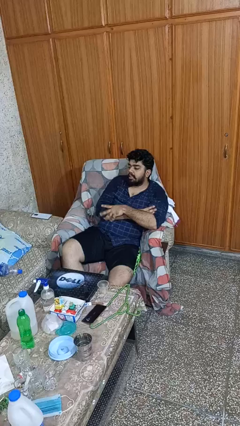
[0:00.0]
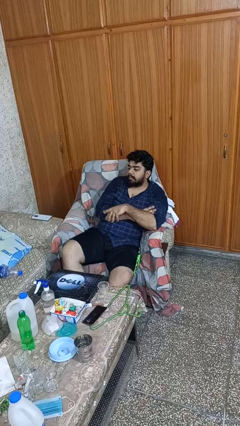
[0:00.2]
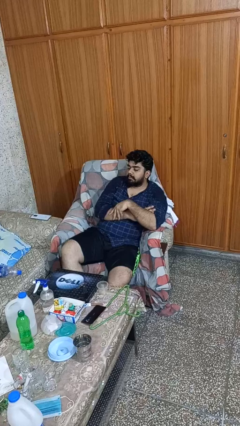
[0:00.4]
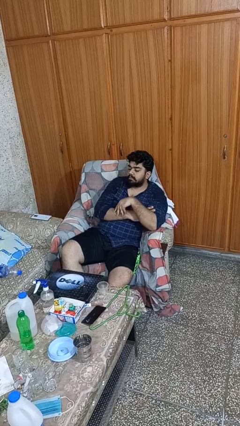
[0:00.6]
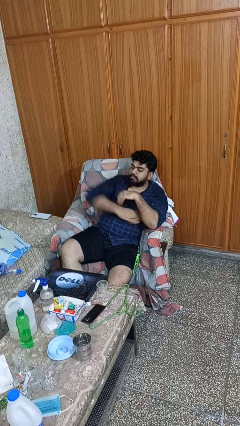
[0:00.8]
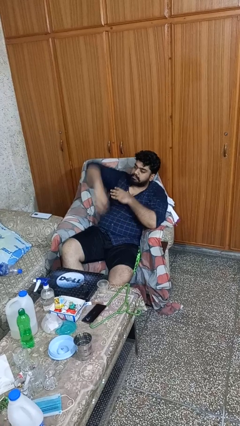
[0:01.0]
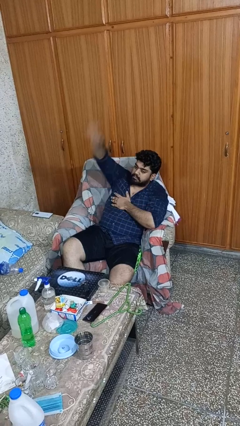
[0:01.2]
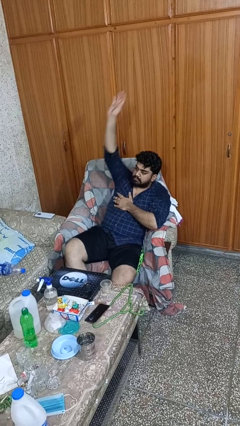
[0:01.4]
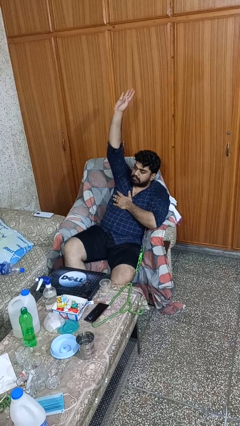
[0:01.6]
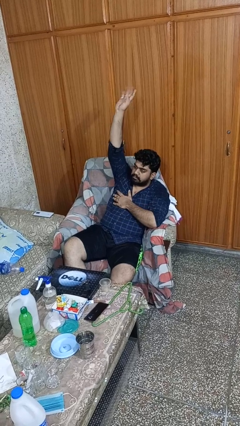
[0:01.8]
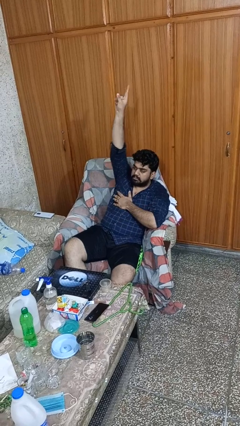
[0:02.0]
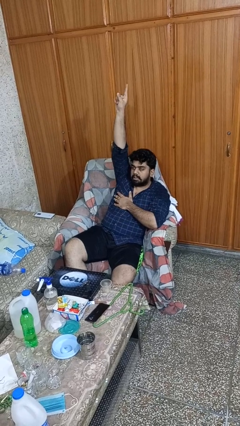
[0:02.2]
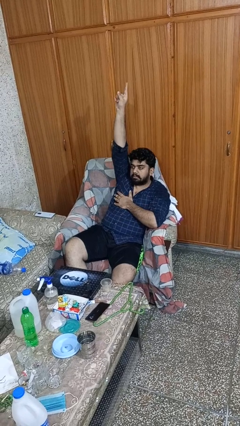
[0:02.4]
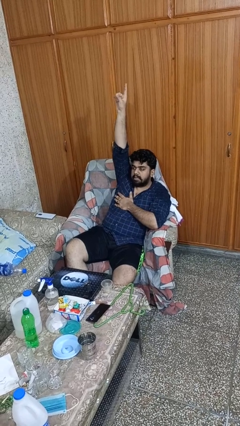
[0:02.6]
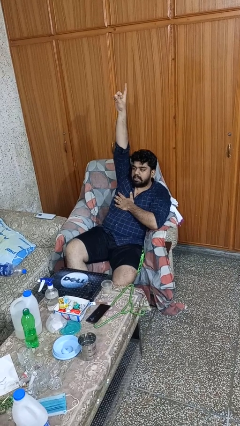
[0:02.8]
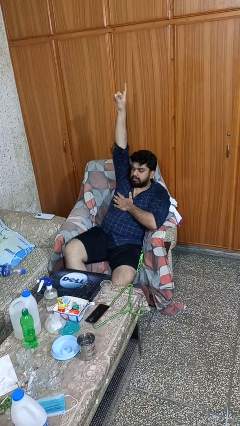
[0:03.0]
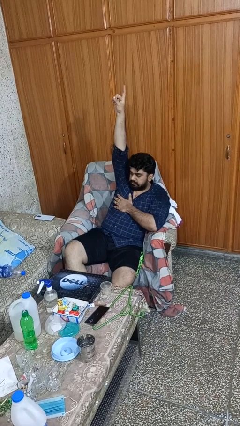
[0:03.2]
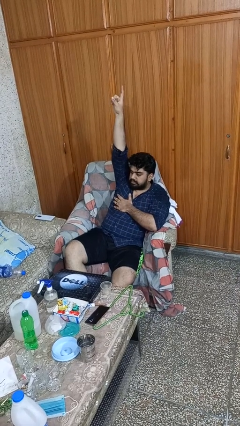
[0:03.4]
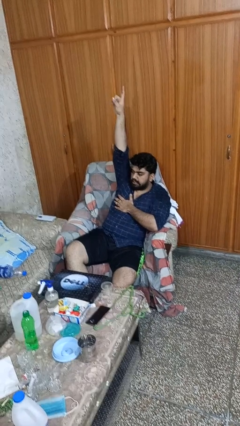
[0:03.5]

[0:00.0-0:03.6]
person gestures raise hand

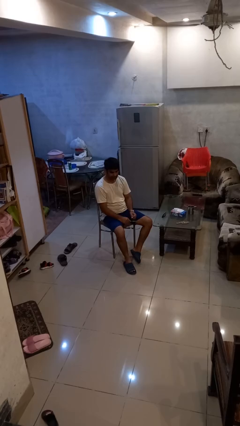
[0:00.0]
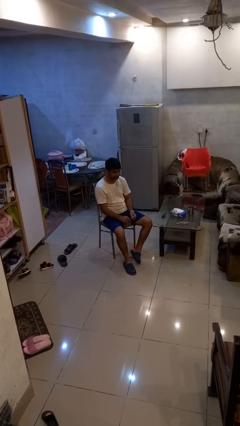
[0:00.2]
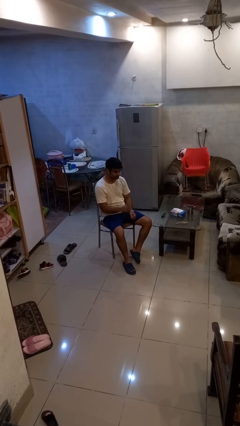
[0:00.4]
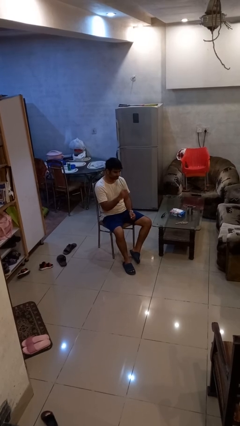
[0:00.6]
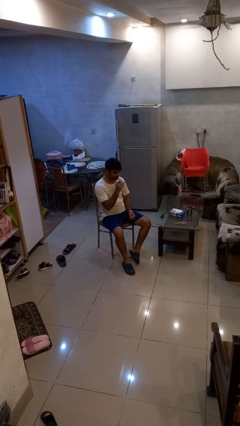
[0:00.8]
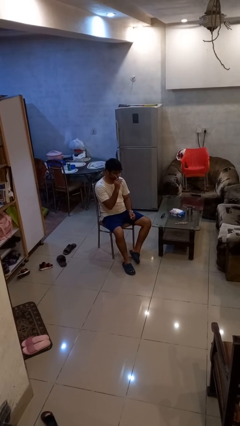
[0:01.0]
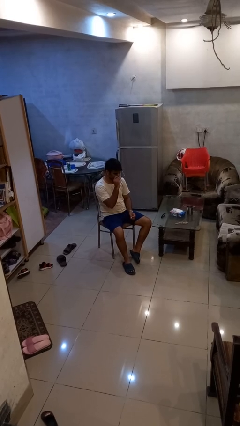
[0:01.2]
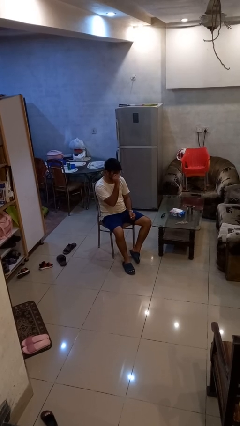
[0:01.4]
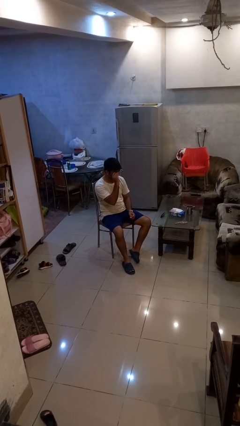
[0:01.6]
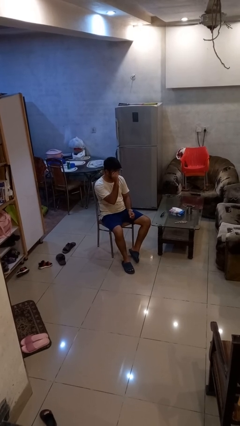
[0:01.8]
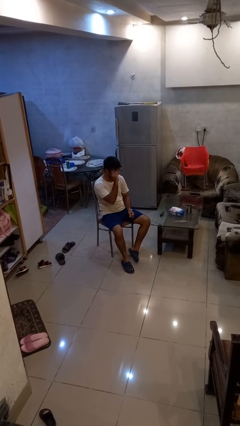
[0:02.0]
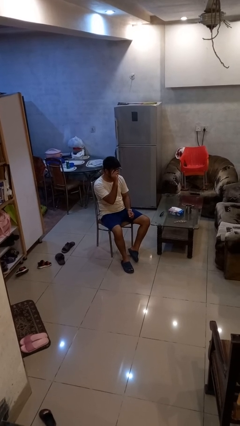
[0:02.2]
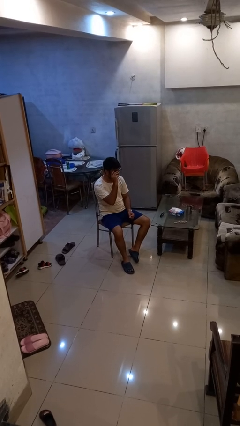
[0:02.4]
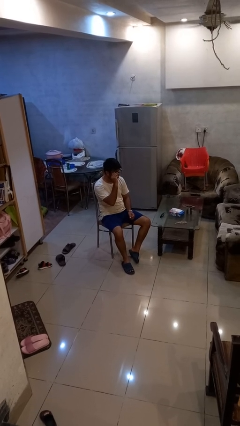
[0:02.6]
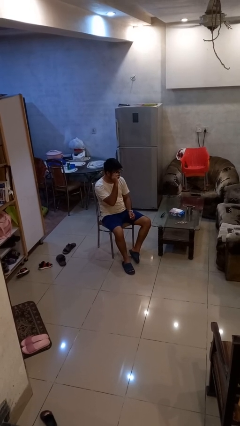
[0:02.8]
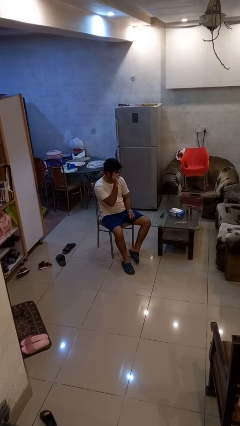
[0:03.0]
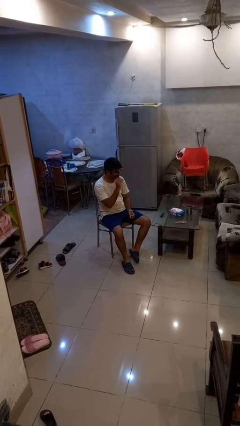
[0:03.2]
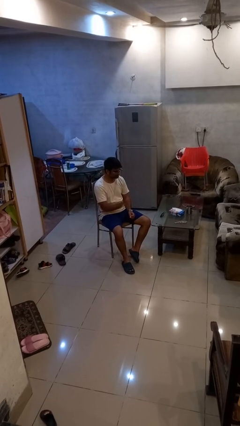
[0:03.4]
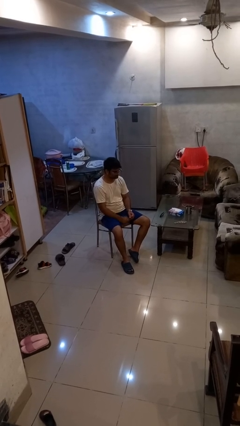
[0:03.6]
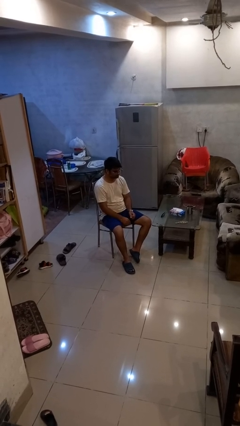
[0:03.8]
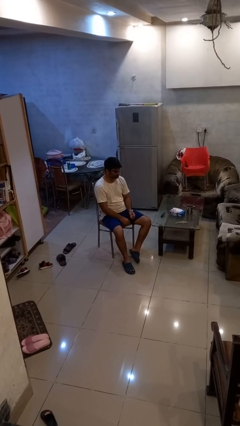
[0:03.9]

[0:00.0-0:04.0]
person puts on glasses

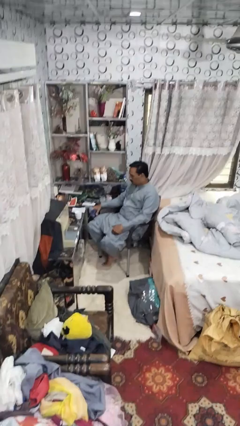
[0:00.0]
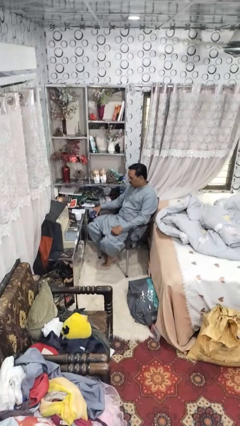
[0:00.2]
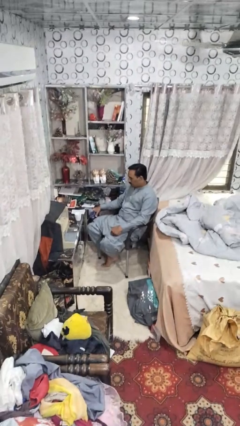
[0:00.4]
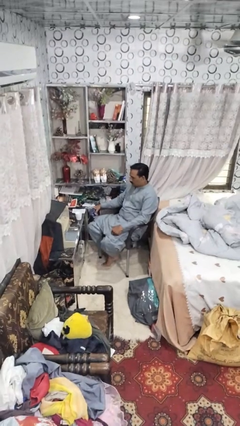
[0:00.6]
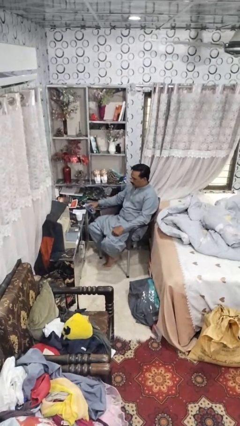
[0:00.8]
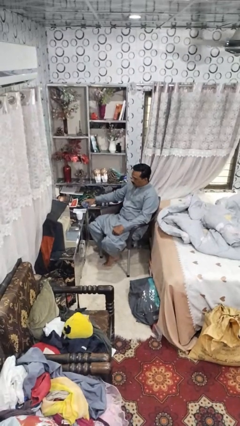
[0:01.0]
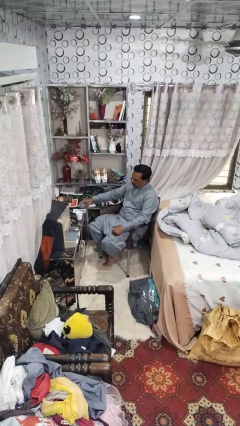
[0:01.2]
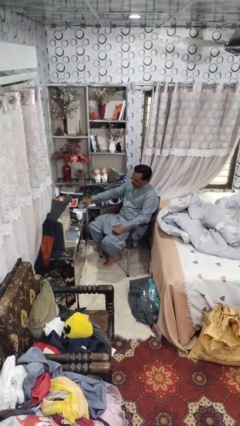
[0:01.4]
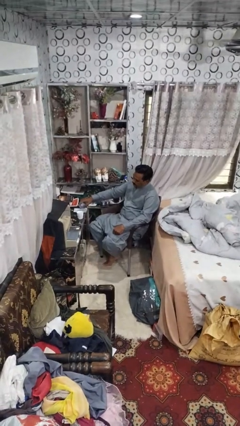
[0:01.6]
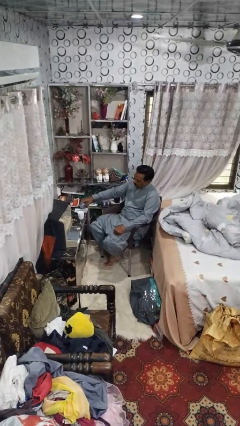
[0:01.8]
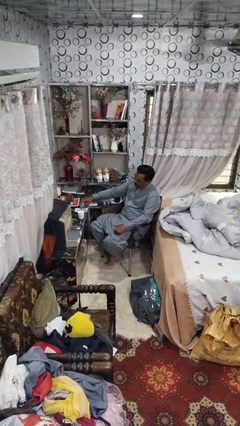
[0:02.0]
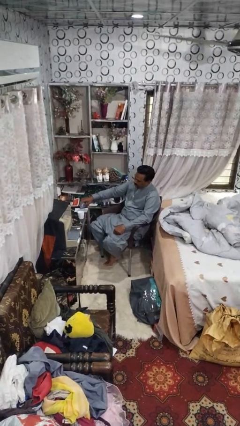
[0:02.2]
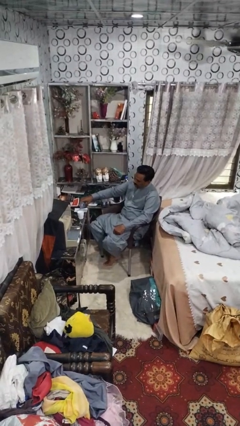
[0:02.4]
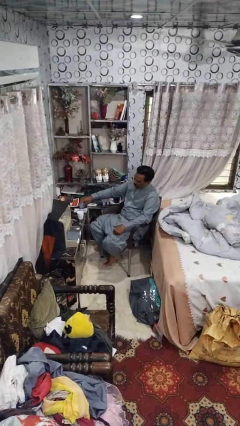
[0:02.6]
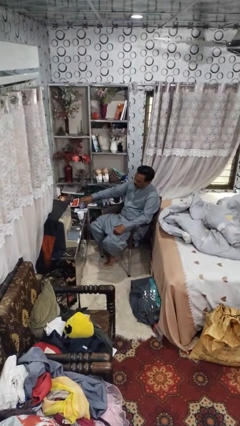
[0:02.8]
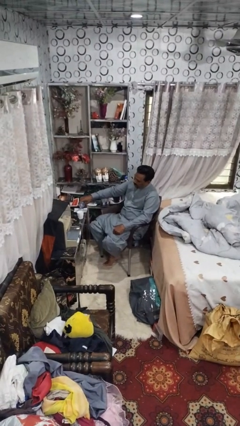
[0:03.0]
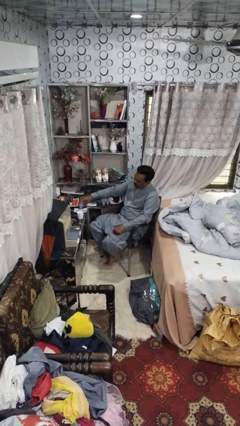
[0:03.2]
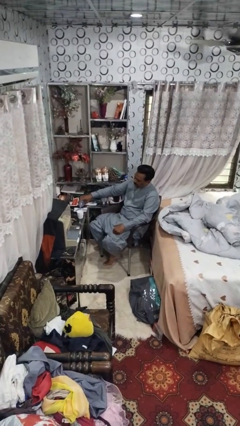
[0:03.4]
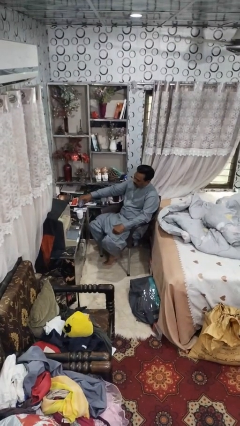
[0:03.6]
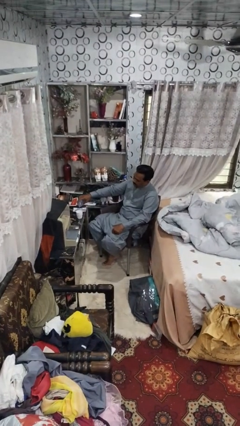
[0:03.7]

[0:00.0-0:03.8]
person pours liquid into cup

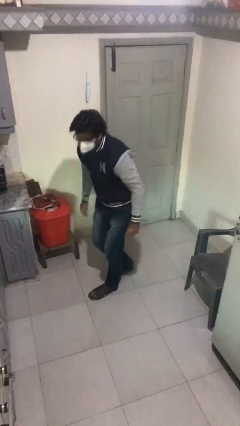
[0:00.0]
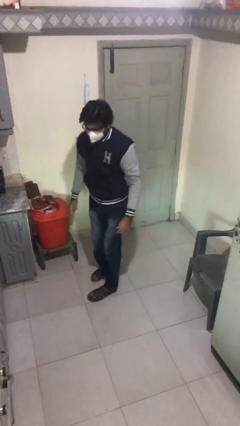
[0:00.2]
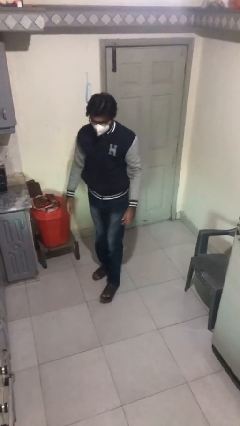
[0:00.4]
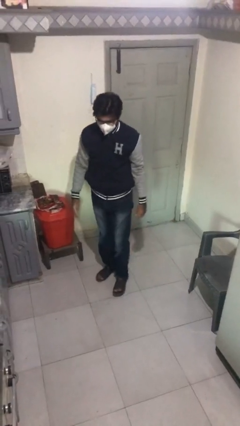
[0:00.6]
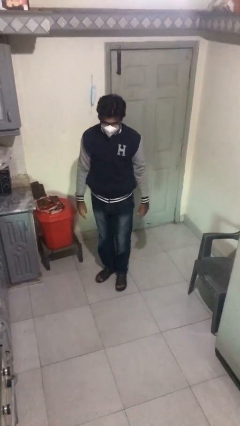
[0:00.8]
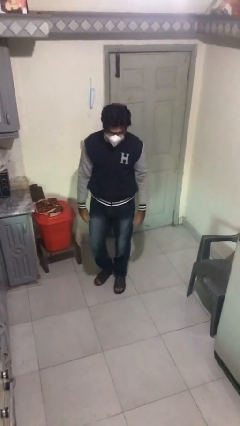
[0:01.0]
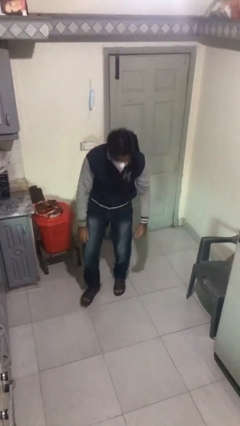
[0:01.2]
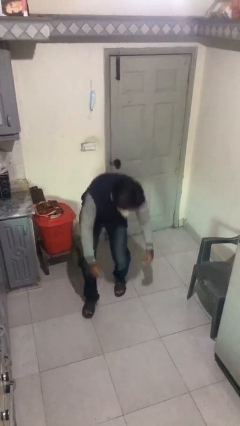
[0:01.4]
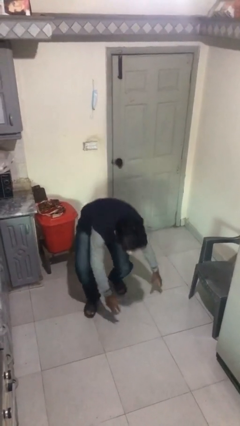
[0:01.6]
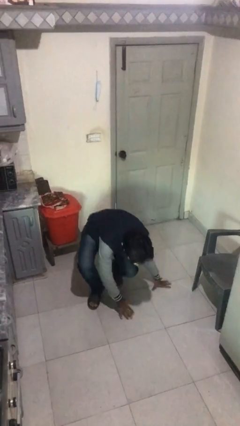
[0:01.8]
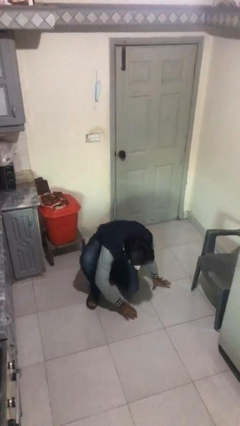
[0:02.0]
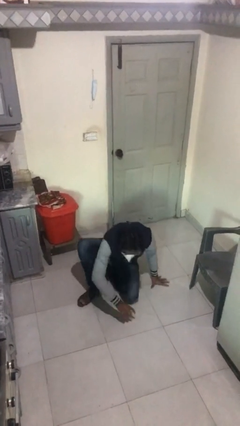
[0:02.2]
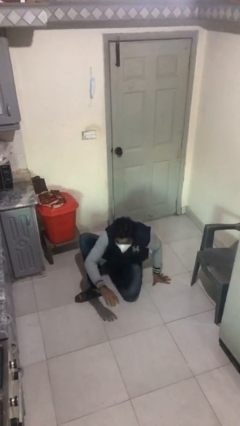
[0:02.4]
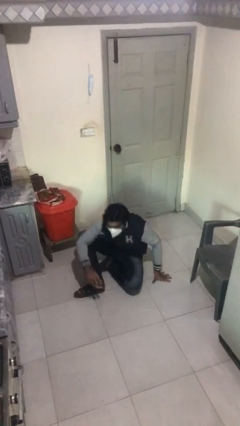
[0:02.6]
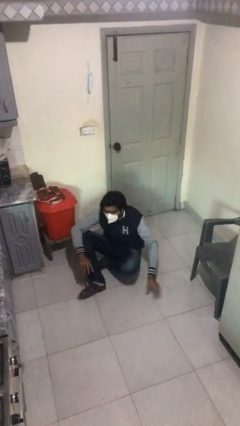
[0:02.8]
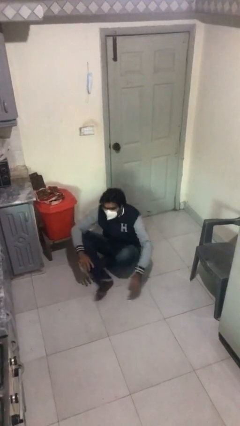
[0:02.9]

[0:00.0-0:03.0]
person sits down

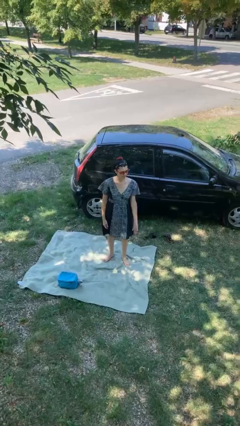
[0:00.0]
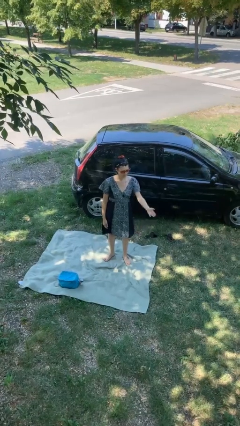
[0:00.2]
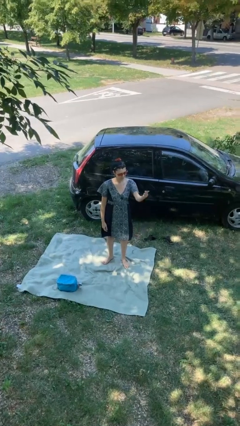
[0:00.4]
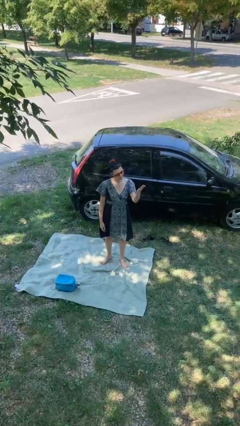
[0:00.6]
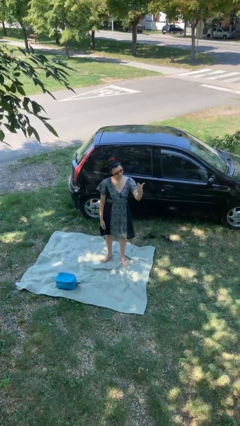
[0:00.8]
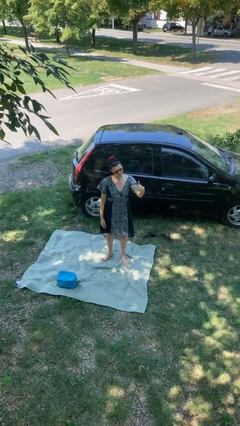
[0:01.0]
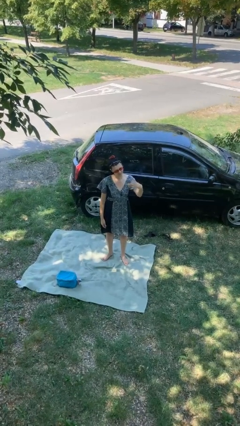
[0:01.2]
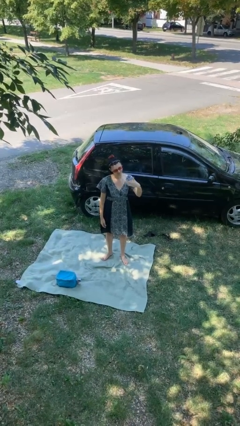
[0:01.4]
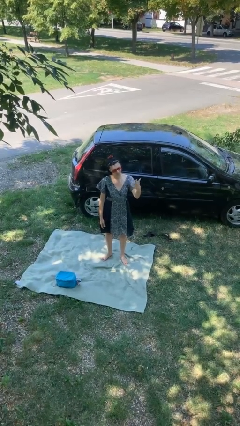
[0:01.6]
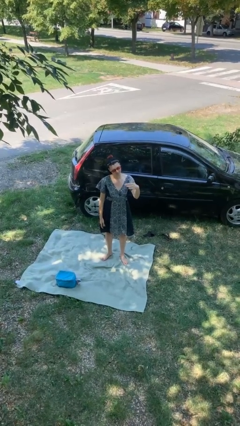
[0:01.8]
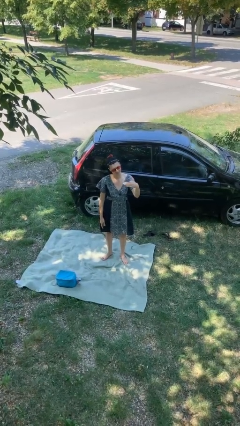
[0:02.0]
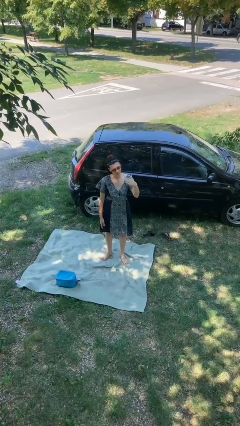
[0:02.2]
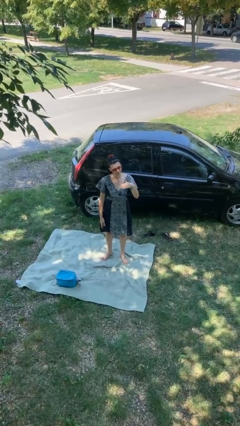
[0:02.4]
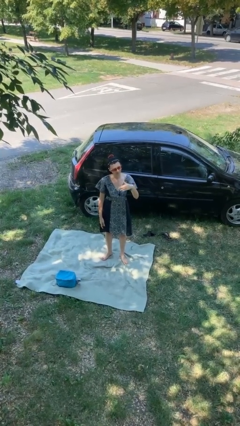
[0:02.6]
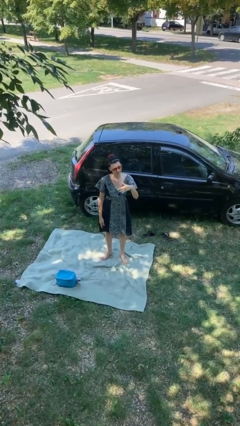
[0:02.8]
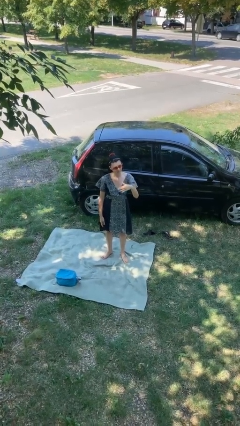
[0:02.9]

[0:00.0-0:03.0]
person gestures come here

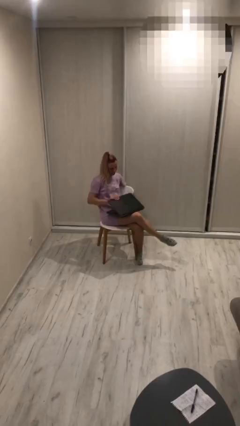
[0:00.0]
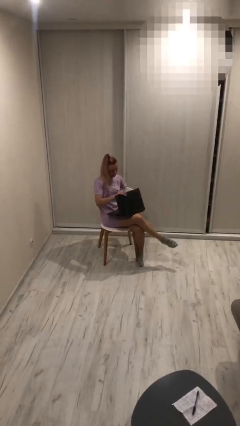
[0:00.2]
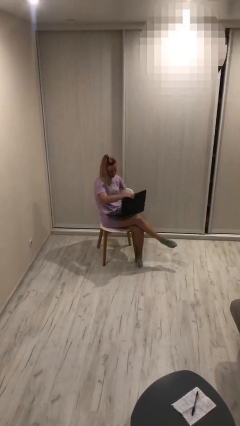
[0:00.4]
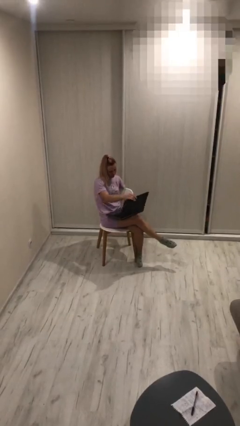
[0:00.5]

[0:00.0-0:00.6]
person opens laptop
